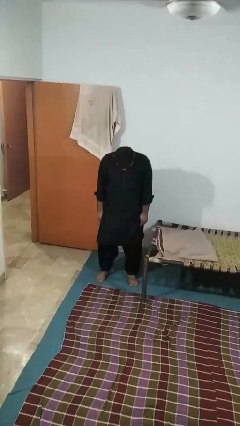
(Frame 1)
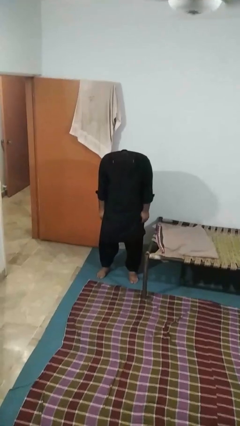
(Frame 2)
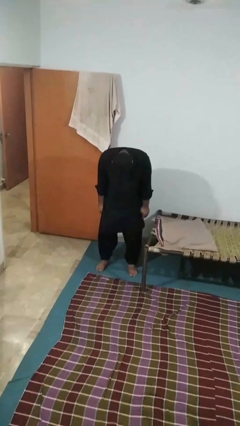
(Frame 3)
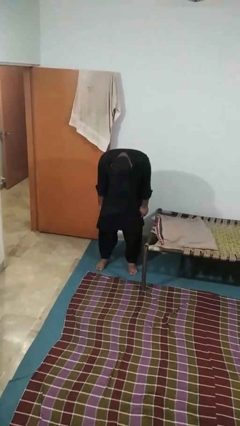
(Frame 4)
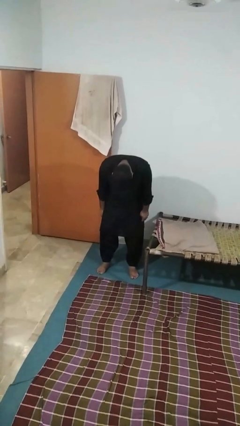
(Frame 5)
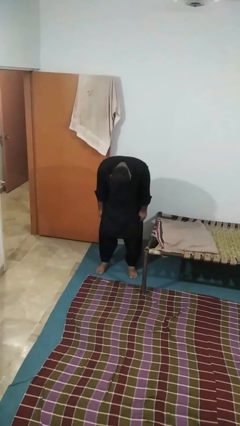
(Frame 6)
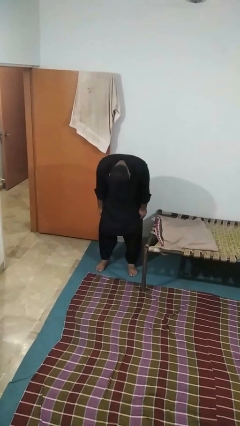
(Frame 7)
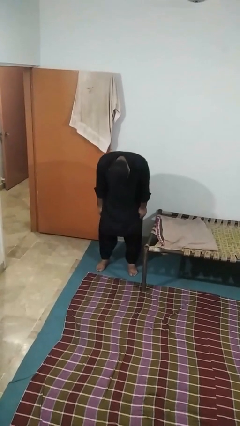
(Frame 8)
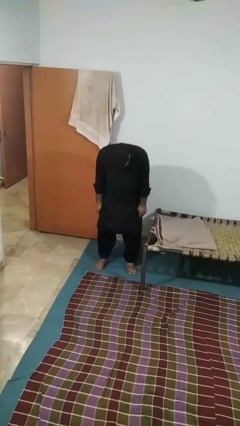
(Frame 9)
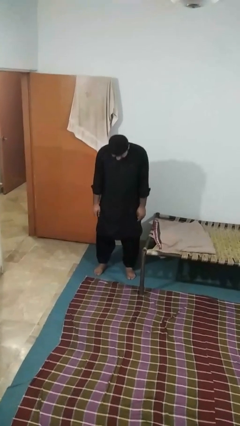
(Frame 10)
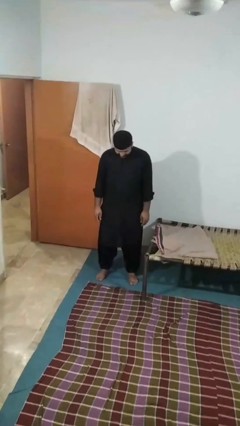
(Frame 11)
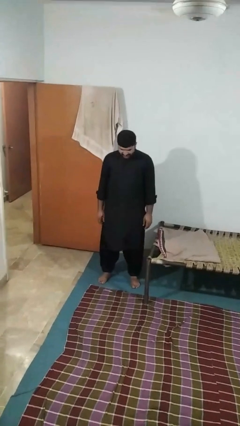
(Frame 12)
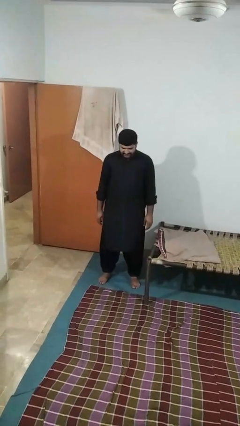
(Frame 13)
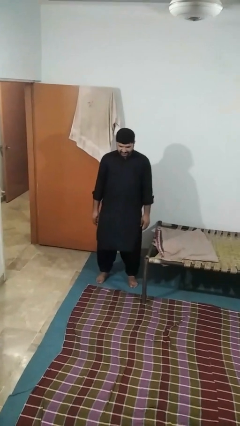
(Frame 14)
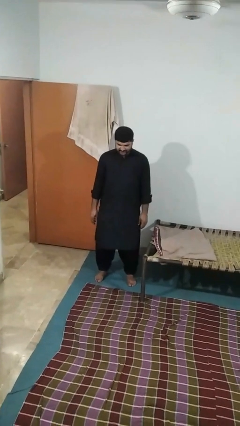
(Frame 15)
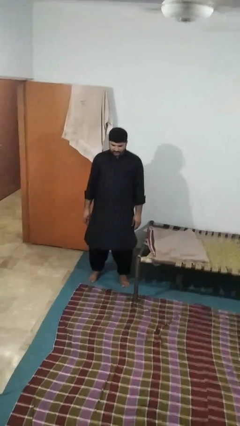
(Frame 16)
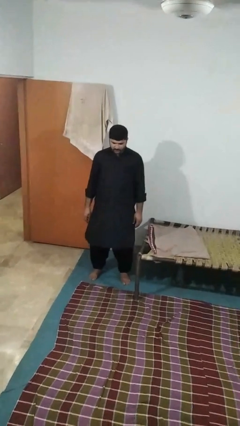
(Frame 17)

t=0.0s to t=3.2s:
person bows

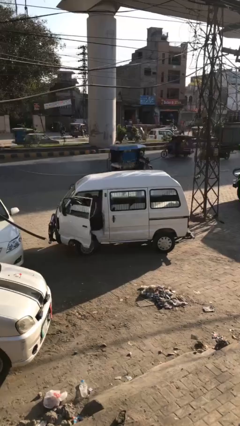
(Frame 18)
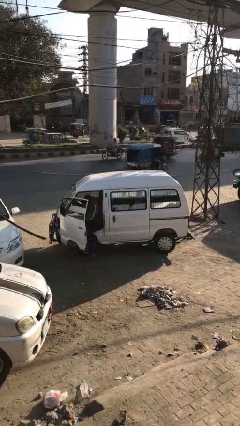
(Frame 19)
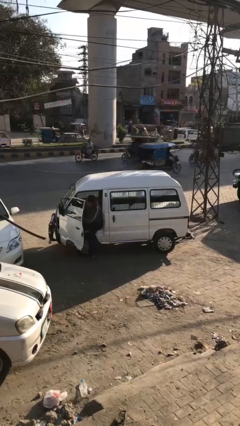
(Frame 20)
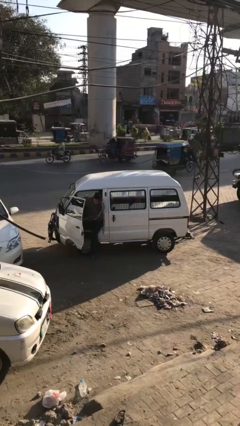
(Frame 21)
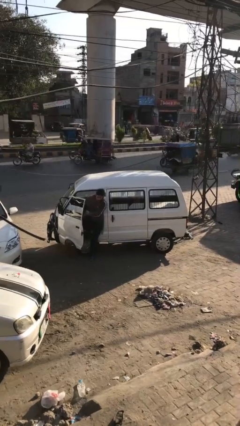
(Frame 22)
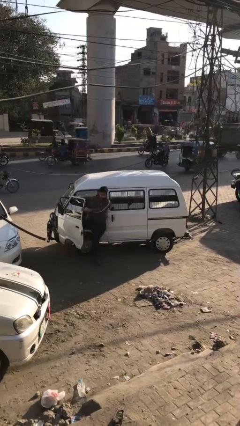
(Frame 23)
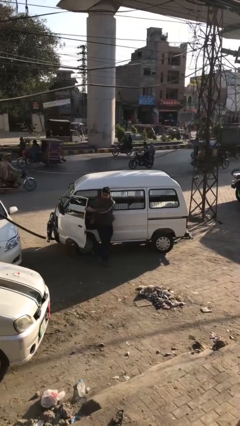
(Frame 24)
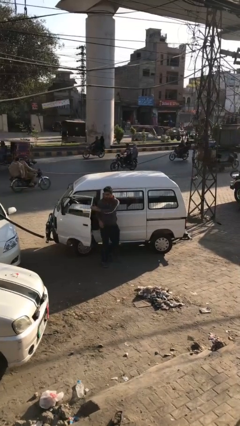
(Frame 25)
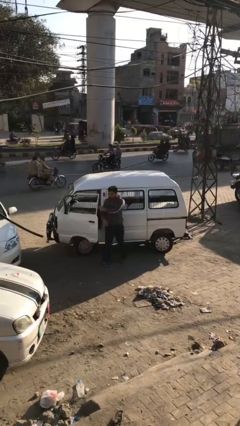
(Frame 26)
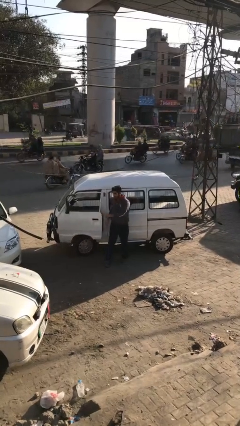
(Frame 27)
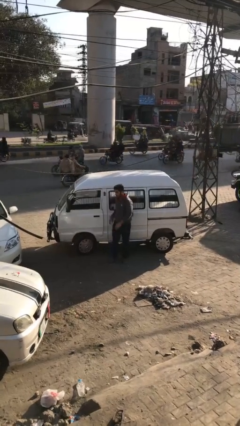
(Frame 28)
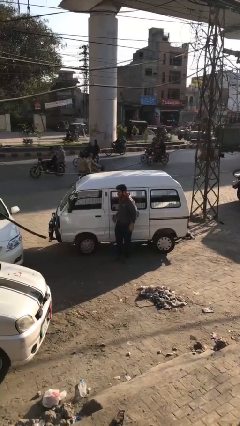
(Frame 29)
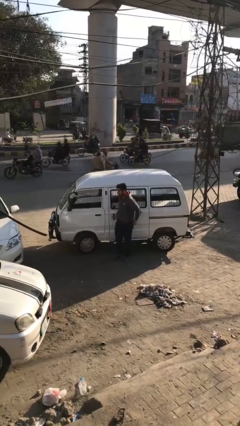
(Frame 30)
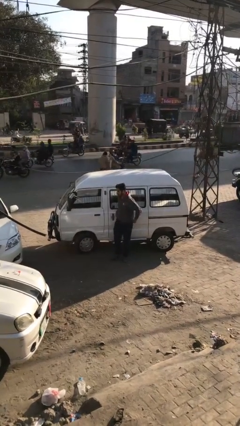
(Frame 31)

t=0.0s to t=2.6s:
car drops off person

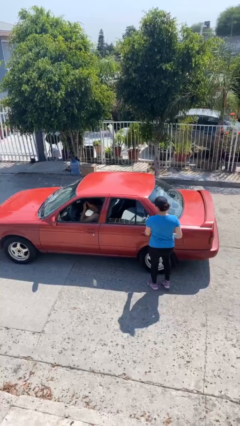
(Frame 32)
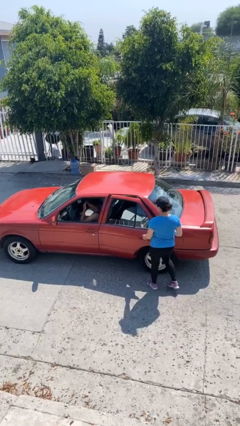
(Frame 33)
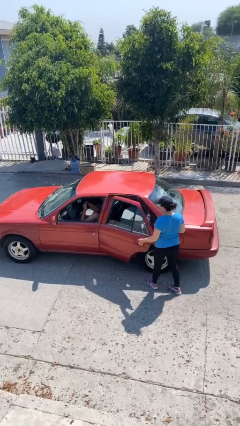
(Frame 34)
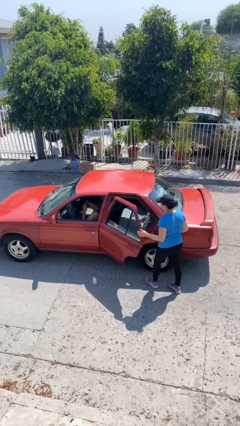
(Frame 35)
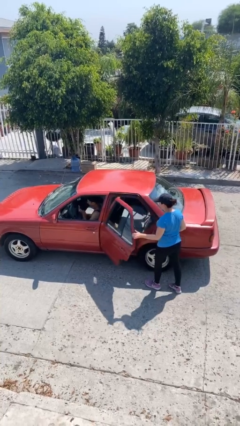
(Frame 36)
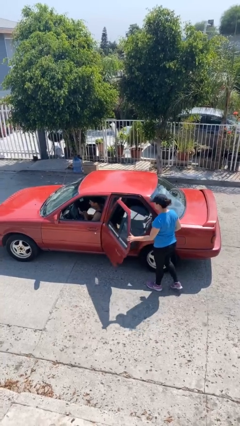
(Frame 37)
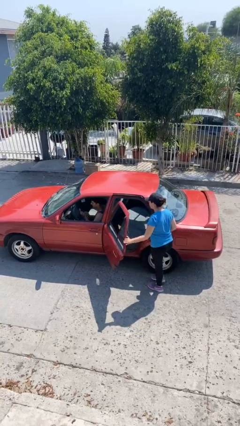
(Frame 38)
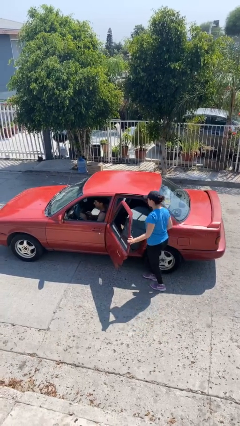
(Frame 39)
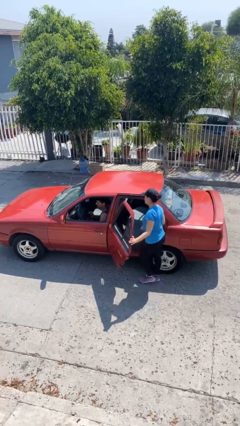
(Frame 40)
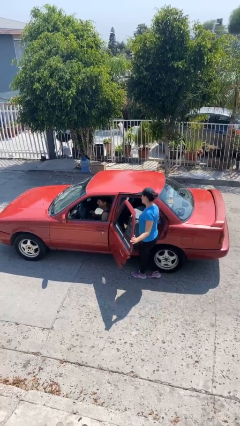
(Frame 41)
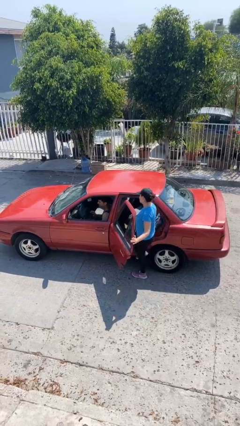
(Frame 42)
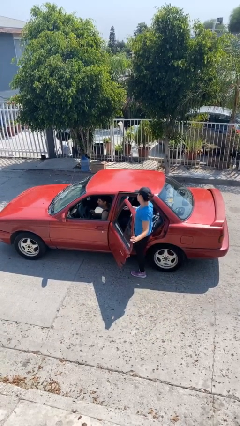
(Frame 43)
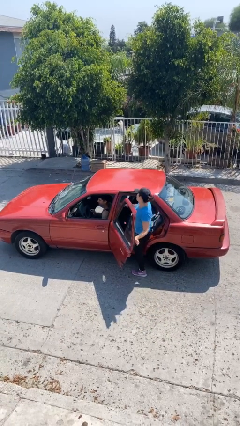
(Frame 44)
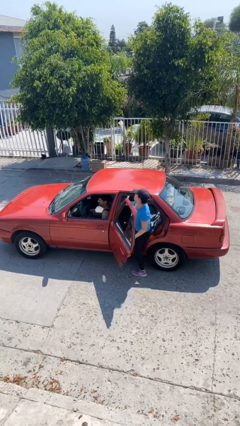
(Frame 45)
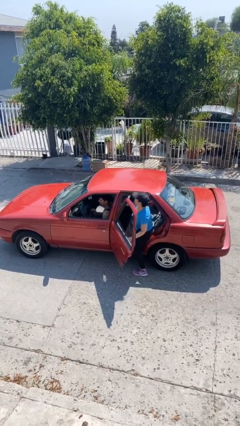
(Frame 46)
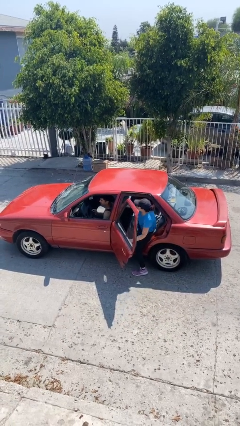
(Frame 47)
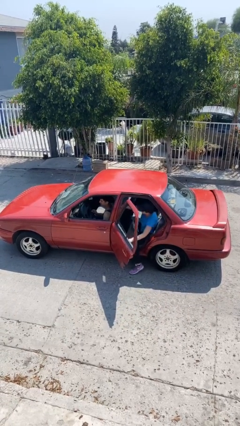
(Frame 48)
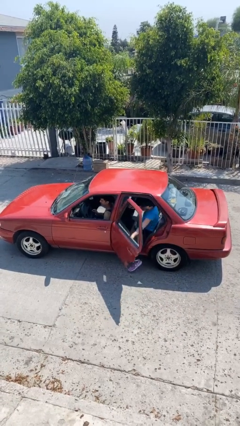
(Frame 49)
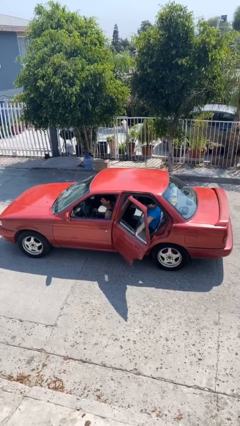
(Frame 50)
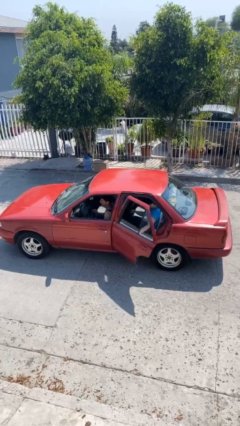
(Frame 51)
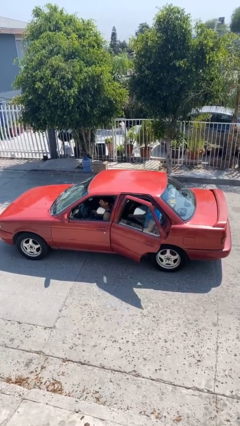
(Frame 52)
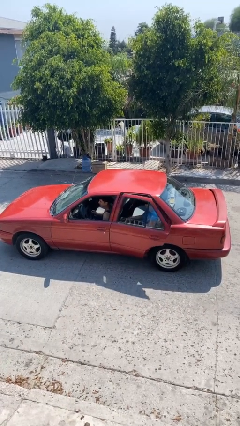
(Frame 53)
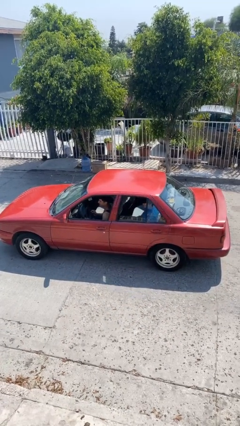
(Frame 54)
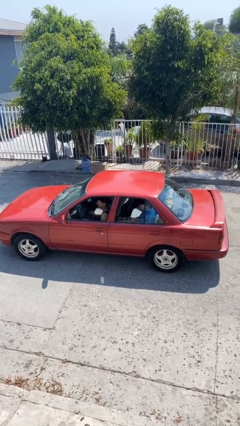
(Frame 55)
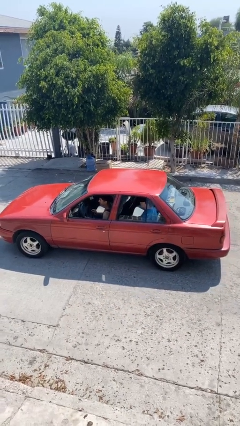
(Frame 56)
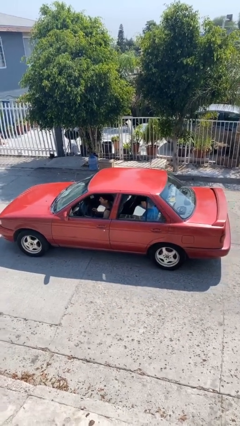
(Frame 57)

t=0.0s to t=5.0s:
car picks up person

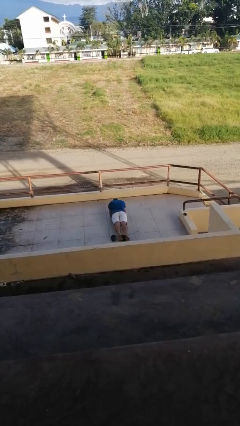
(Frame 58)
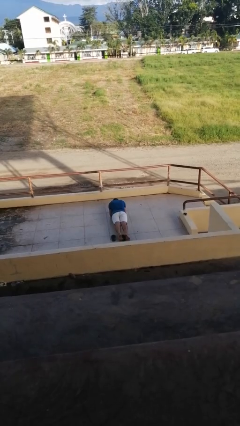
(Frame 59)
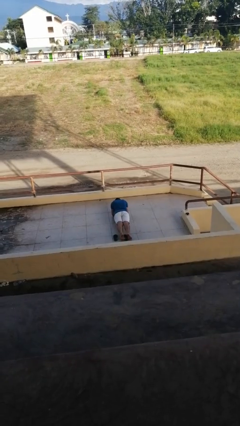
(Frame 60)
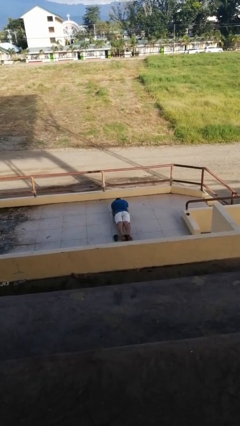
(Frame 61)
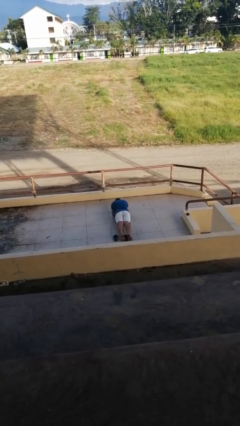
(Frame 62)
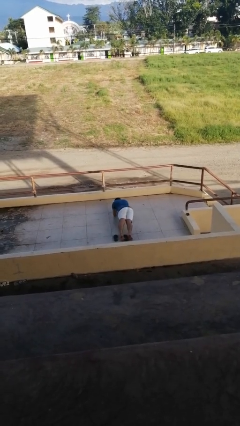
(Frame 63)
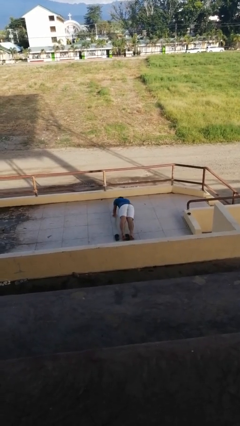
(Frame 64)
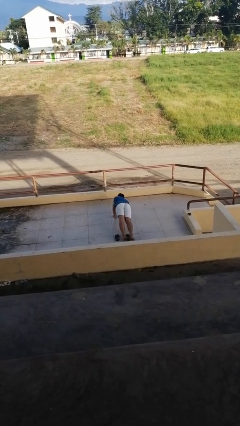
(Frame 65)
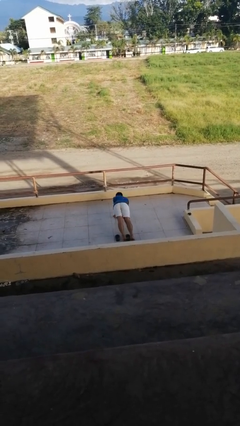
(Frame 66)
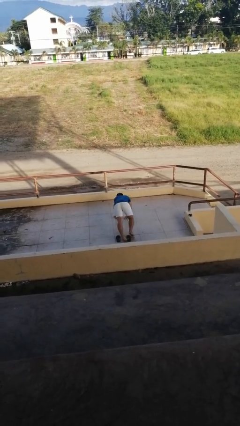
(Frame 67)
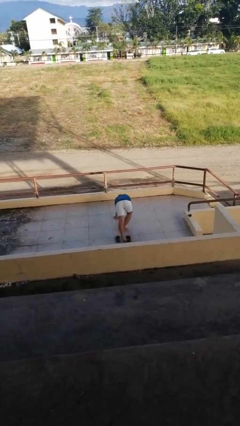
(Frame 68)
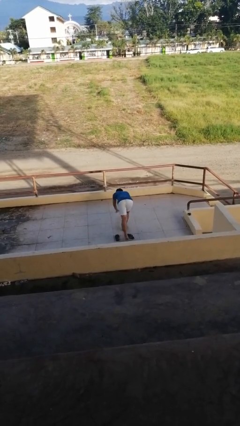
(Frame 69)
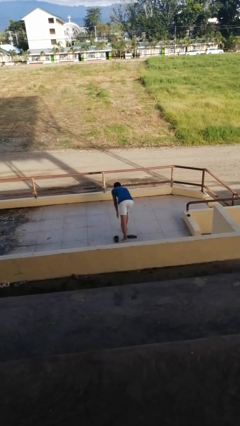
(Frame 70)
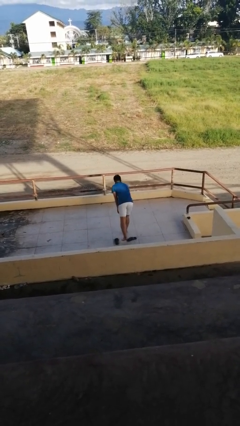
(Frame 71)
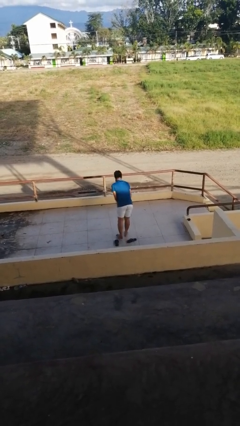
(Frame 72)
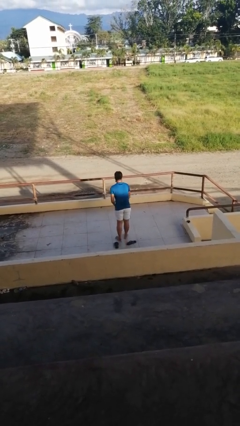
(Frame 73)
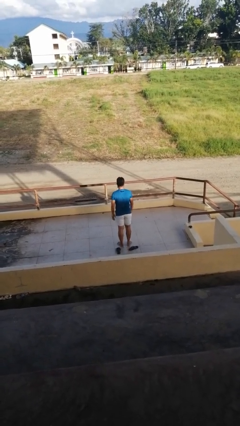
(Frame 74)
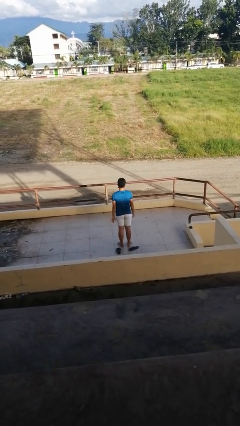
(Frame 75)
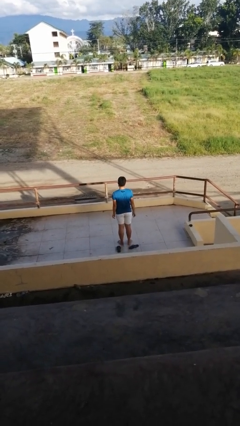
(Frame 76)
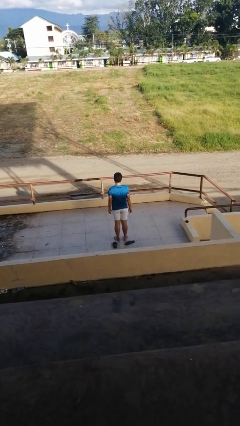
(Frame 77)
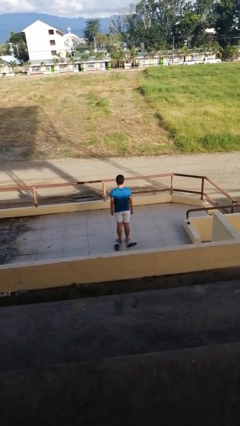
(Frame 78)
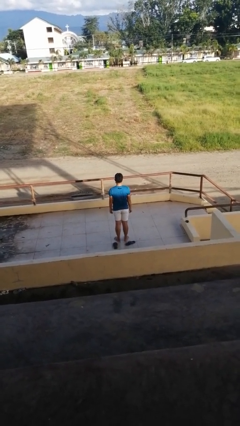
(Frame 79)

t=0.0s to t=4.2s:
person stands up from floor

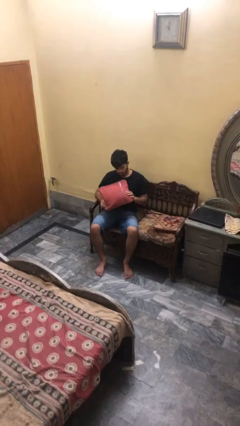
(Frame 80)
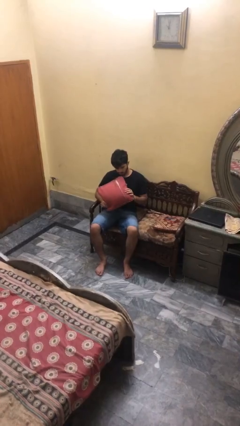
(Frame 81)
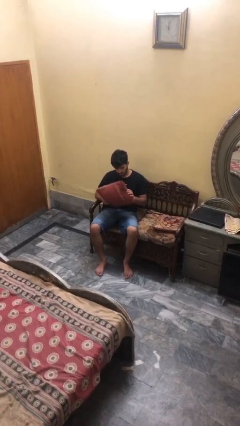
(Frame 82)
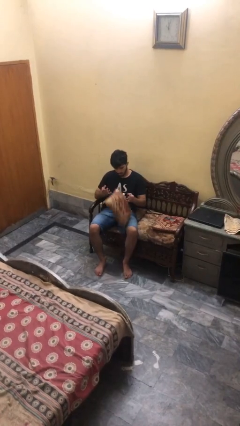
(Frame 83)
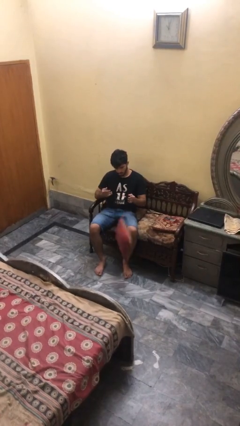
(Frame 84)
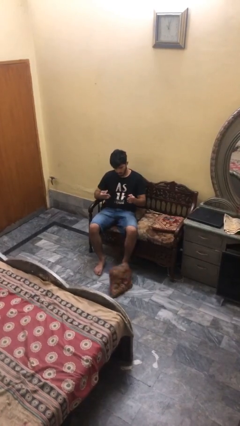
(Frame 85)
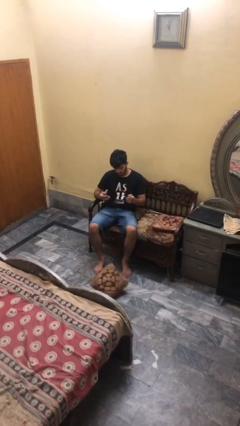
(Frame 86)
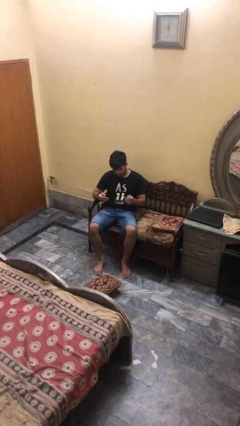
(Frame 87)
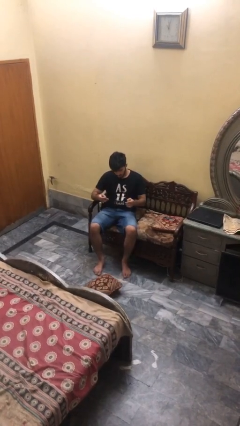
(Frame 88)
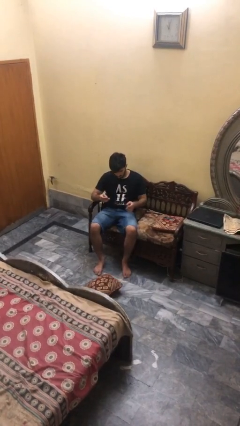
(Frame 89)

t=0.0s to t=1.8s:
person drops object

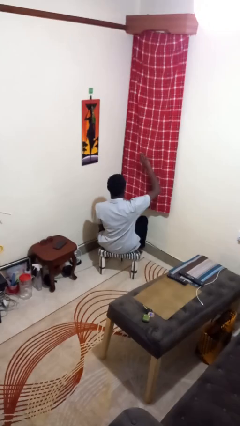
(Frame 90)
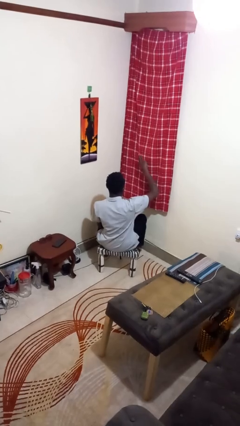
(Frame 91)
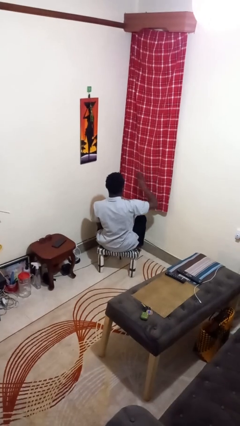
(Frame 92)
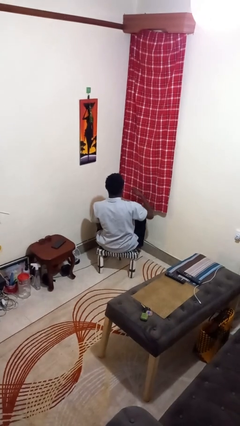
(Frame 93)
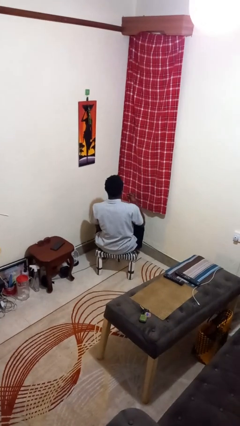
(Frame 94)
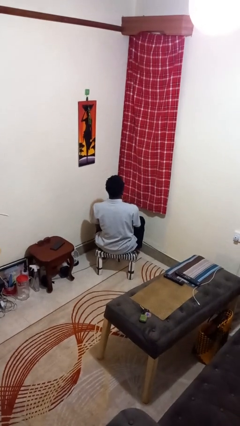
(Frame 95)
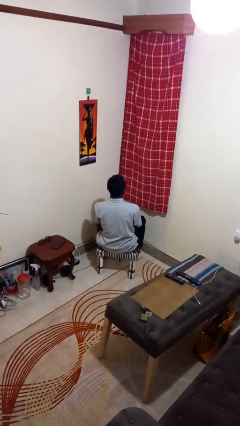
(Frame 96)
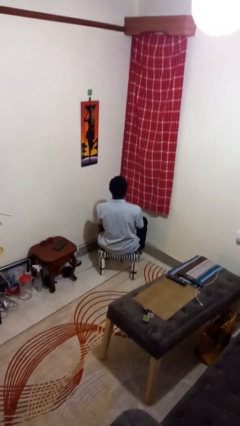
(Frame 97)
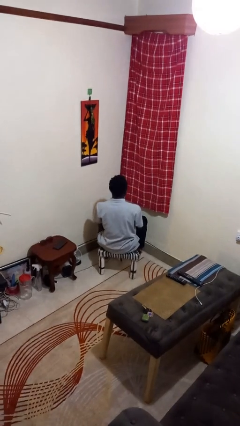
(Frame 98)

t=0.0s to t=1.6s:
person gestures swipe down
